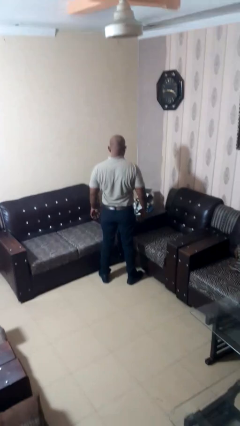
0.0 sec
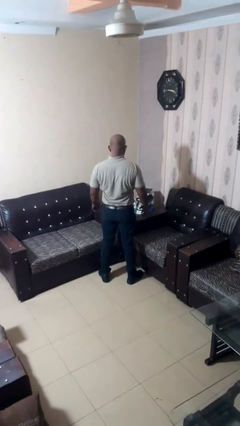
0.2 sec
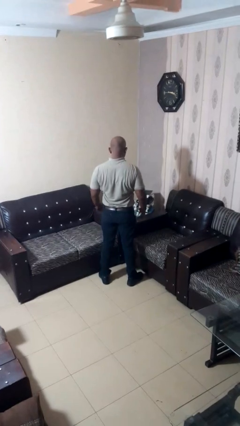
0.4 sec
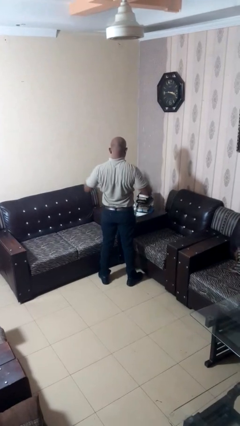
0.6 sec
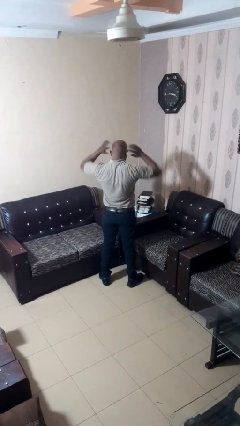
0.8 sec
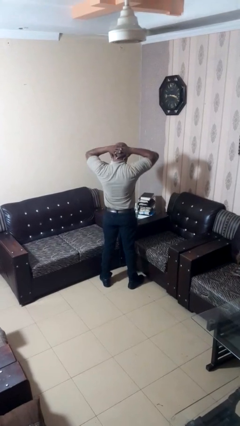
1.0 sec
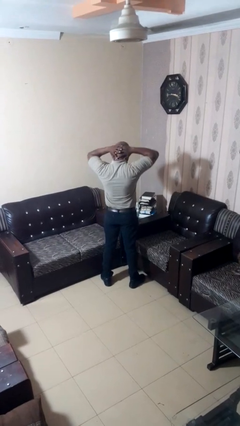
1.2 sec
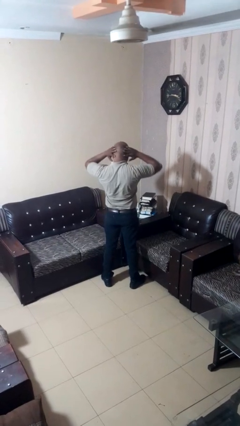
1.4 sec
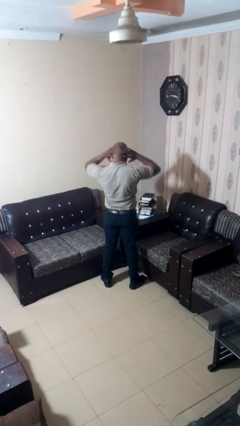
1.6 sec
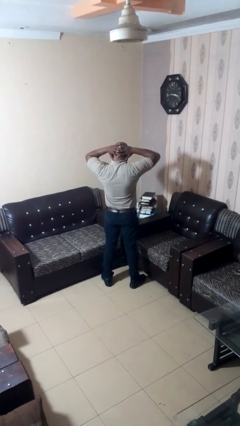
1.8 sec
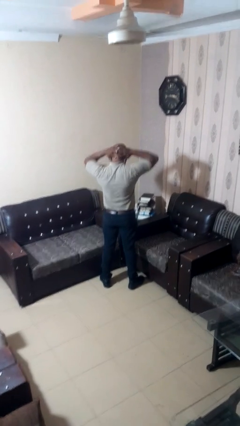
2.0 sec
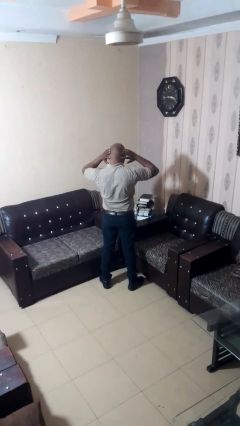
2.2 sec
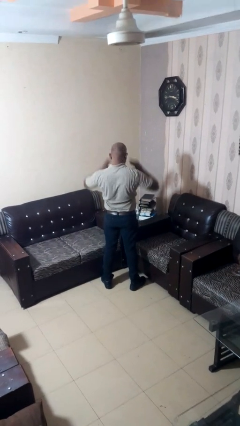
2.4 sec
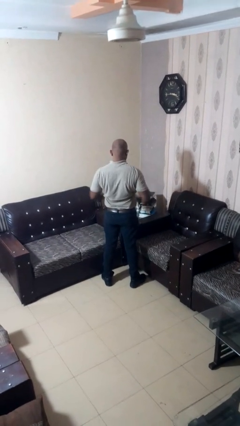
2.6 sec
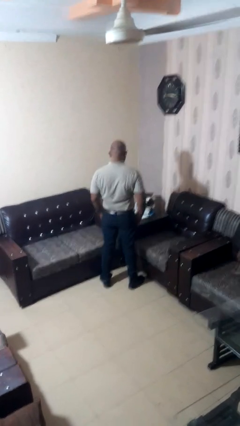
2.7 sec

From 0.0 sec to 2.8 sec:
person rubs neck

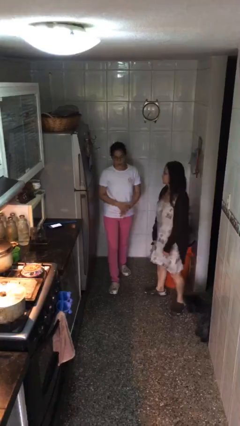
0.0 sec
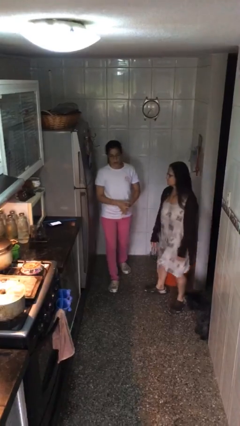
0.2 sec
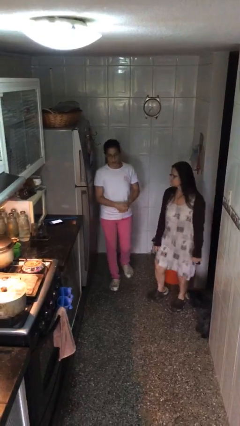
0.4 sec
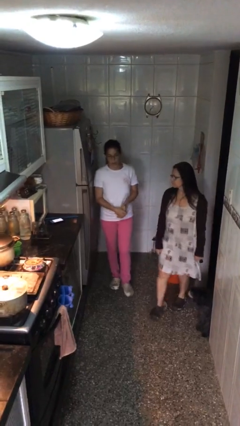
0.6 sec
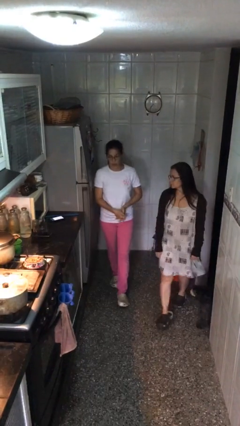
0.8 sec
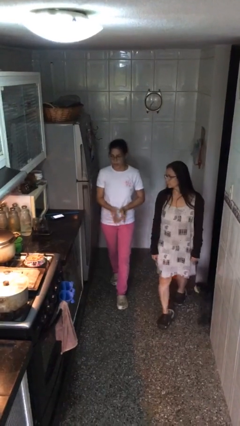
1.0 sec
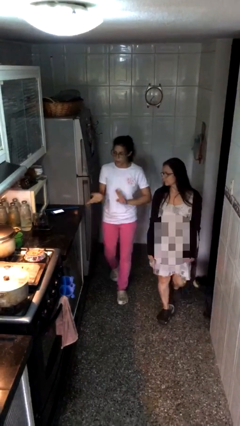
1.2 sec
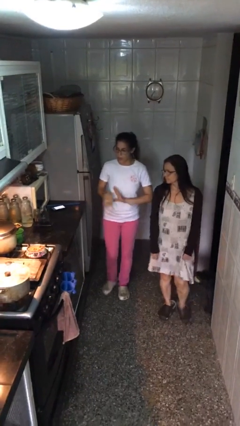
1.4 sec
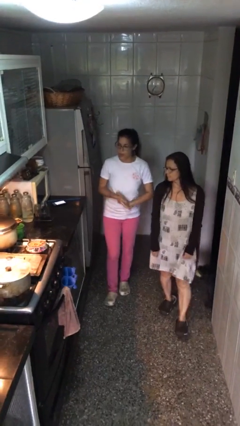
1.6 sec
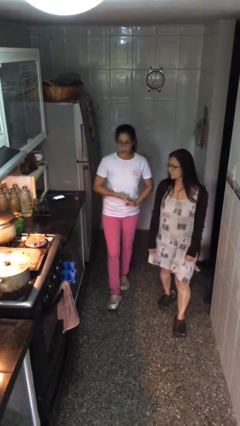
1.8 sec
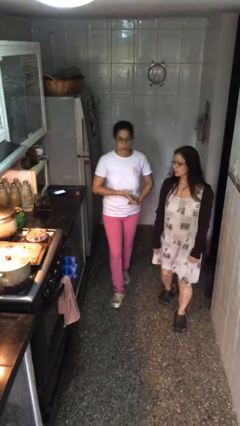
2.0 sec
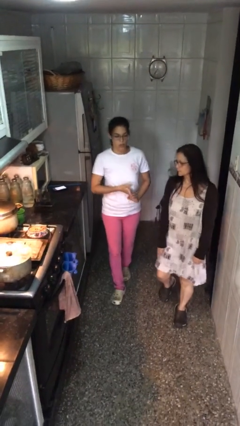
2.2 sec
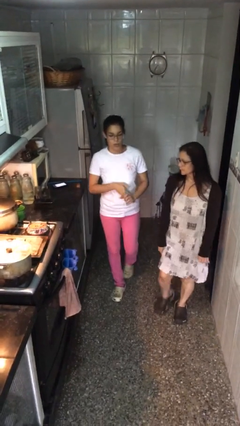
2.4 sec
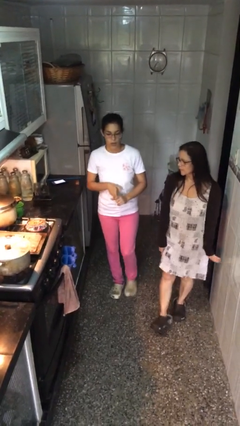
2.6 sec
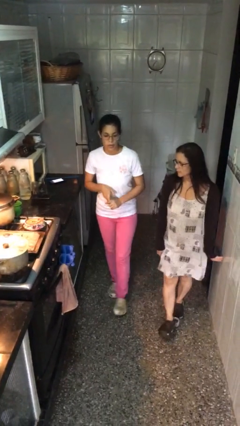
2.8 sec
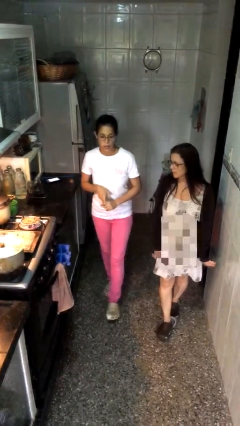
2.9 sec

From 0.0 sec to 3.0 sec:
person talks to person

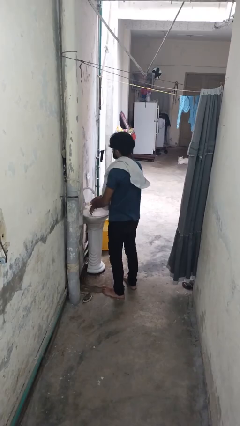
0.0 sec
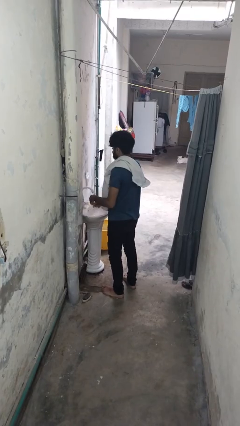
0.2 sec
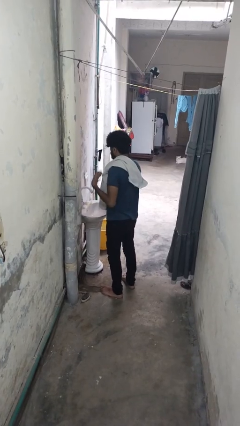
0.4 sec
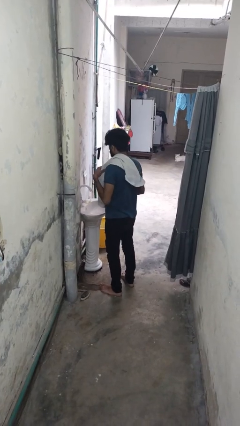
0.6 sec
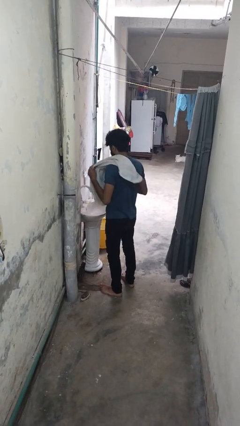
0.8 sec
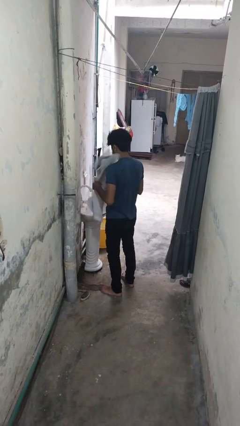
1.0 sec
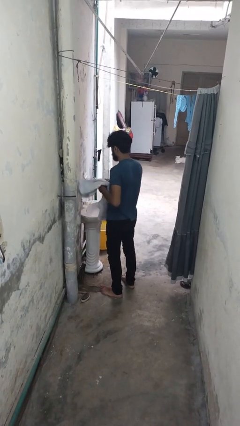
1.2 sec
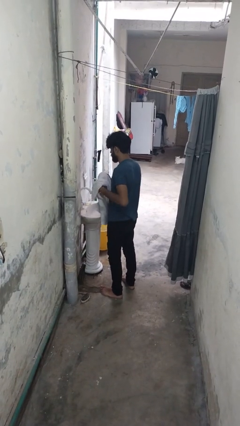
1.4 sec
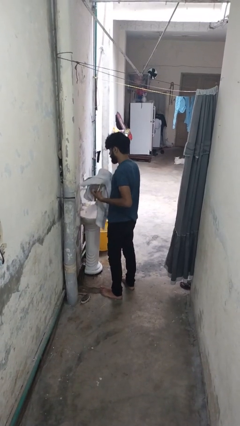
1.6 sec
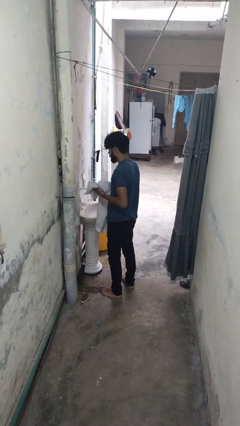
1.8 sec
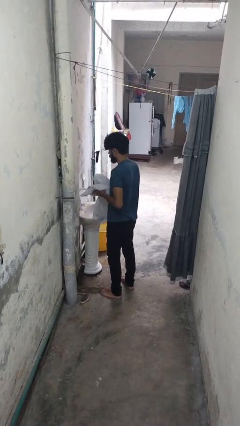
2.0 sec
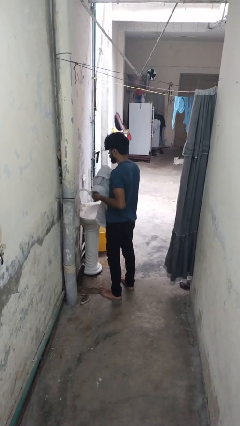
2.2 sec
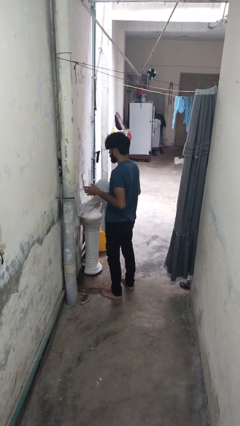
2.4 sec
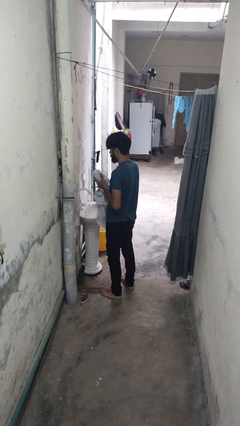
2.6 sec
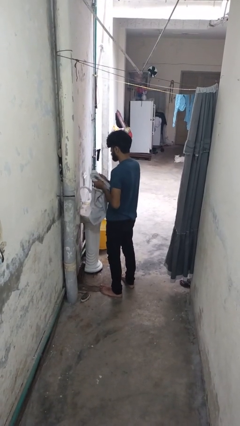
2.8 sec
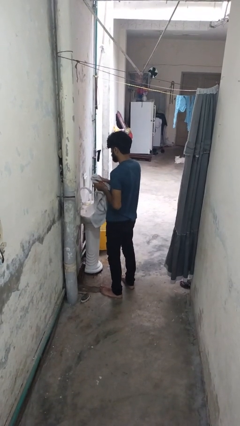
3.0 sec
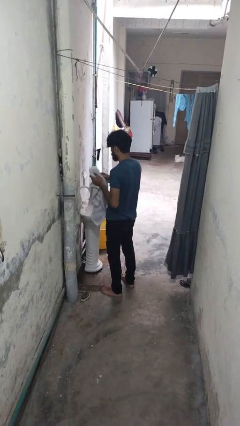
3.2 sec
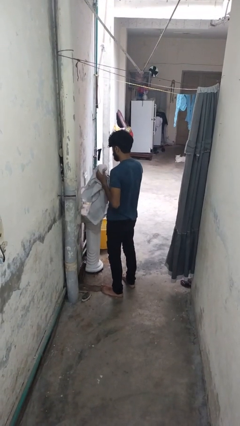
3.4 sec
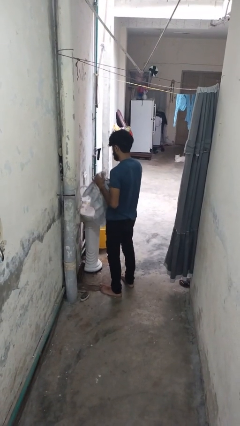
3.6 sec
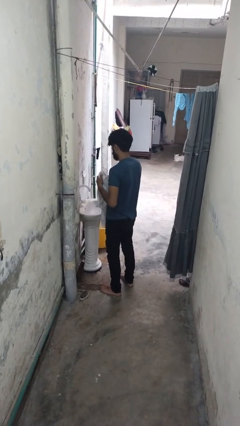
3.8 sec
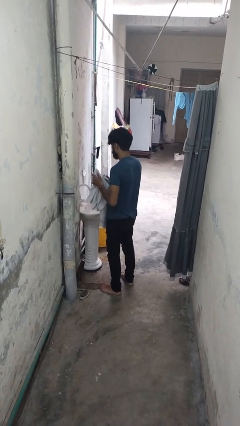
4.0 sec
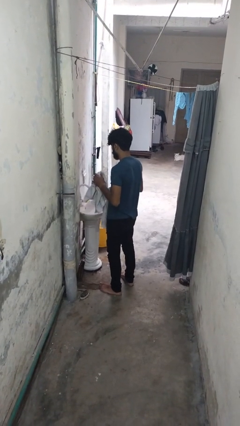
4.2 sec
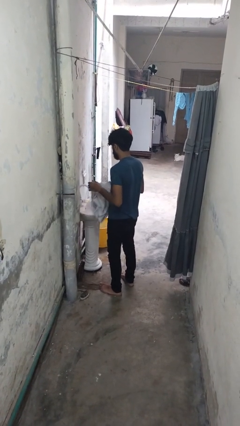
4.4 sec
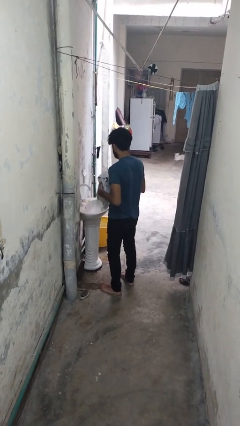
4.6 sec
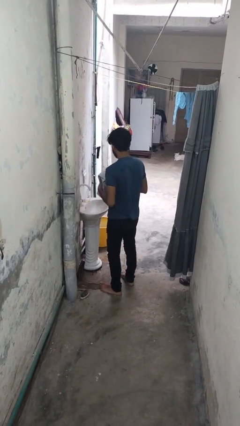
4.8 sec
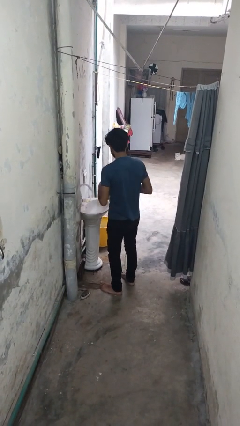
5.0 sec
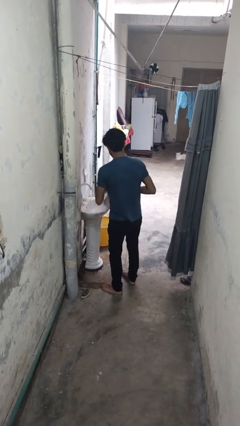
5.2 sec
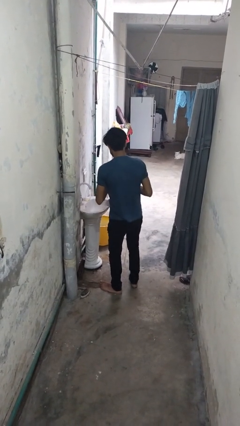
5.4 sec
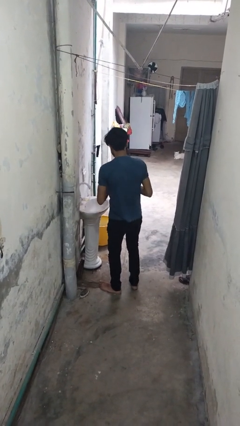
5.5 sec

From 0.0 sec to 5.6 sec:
person dries hands with towel

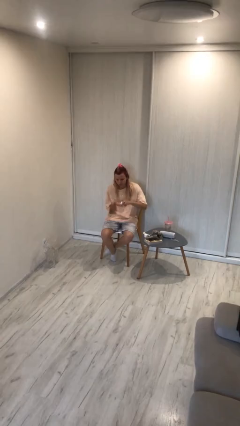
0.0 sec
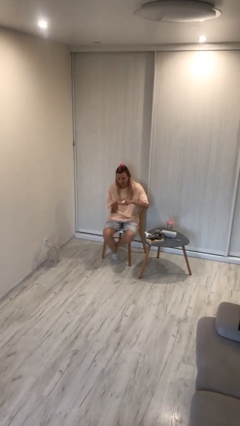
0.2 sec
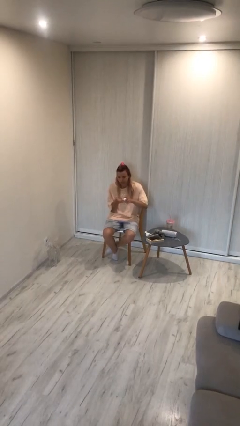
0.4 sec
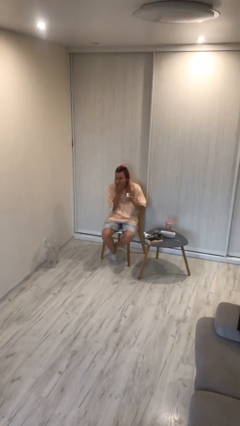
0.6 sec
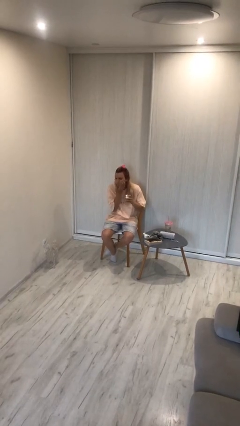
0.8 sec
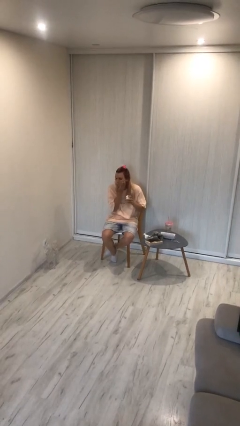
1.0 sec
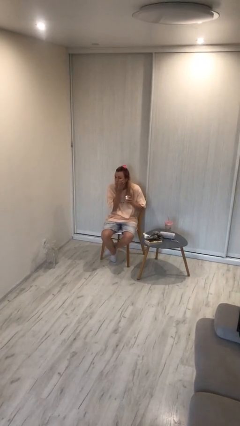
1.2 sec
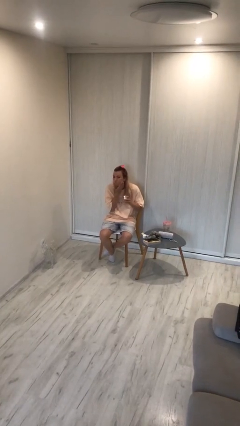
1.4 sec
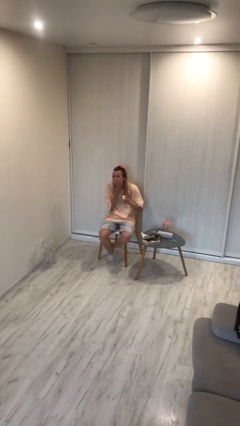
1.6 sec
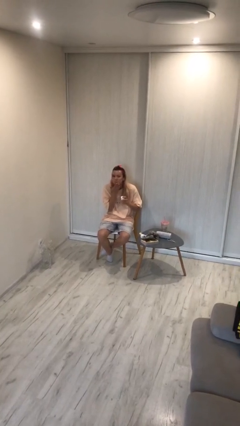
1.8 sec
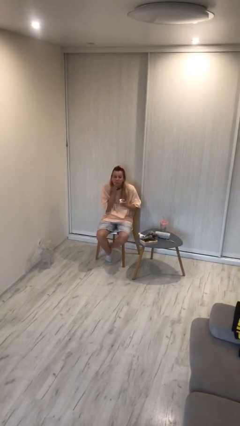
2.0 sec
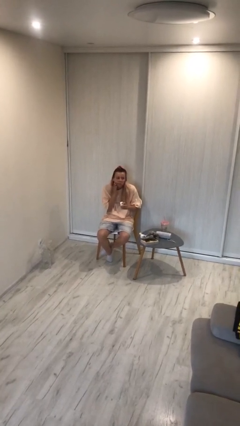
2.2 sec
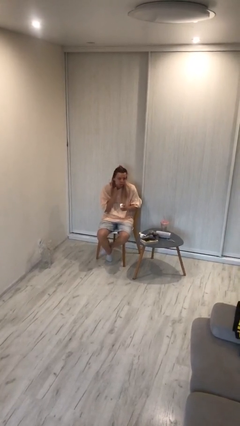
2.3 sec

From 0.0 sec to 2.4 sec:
person applies shaving cream

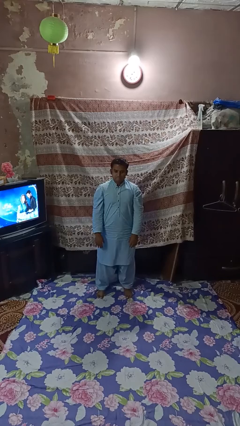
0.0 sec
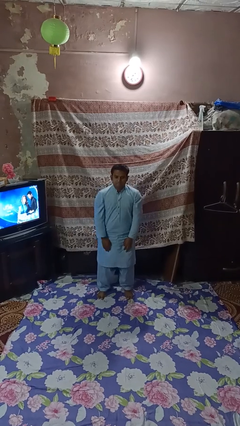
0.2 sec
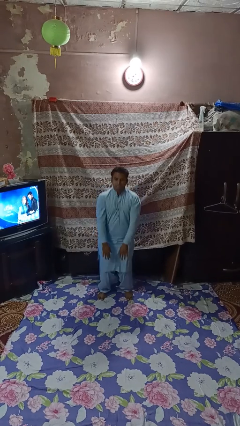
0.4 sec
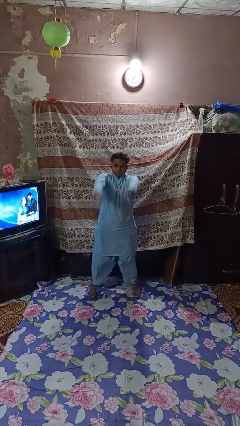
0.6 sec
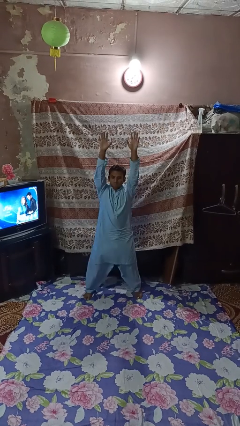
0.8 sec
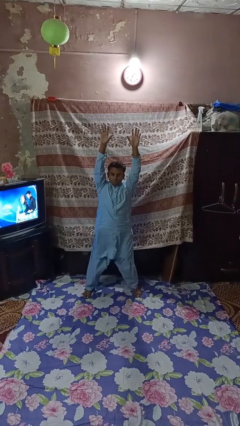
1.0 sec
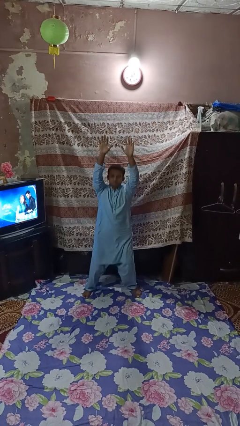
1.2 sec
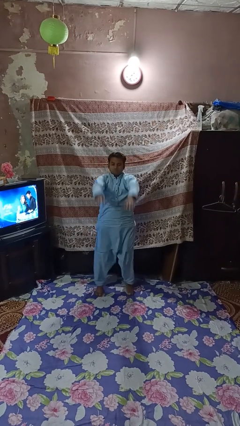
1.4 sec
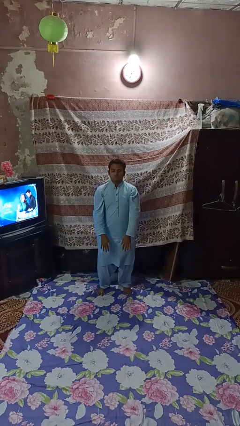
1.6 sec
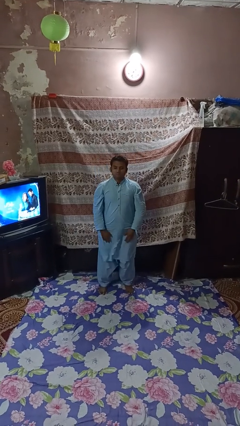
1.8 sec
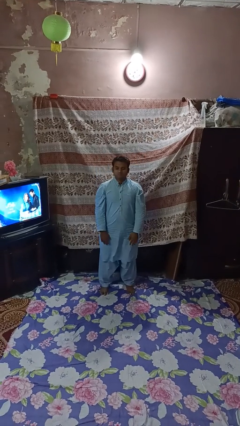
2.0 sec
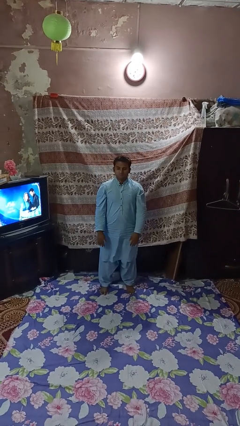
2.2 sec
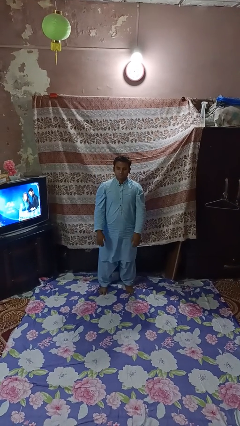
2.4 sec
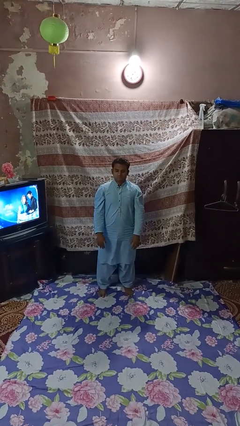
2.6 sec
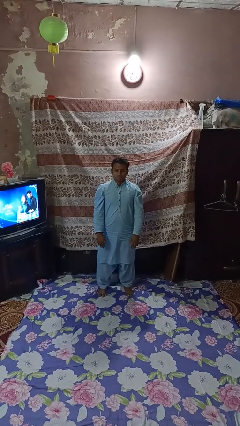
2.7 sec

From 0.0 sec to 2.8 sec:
person exercises with jumping jacks

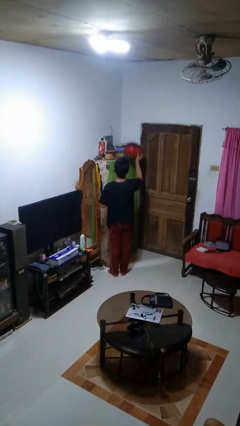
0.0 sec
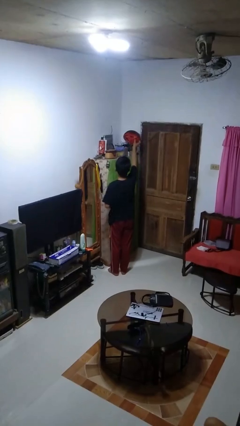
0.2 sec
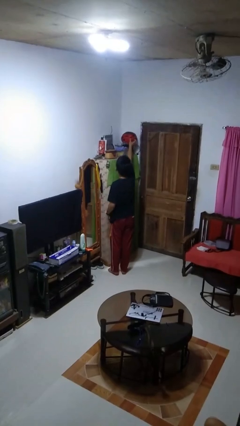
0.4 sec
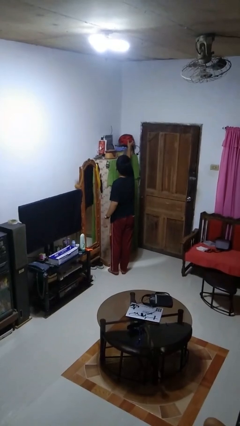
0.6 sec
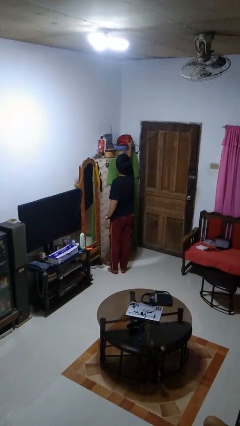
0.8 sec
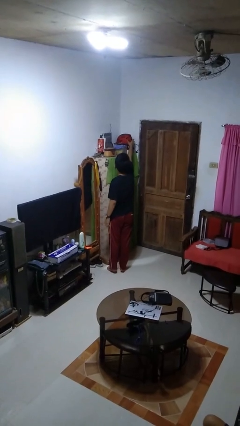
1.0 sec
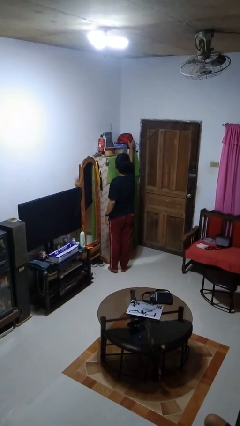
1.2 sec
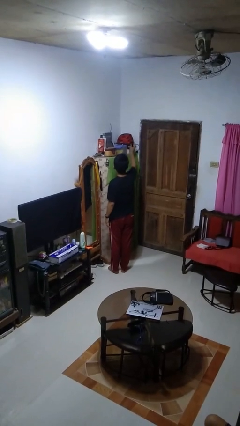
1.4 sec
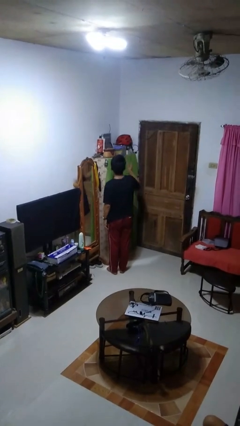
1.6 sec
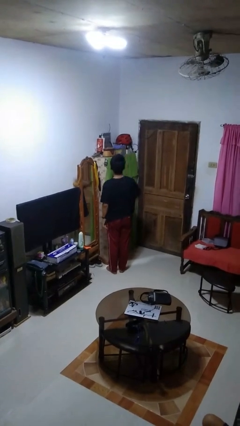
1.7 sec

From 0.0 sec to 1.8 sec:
person puts down object on shelf
